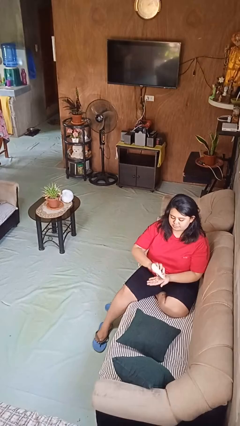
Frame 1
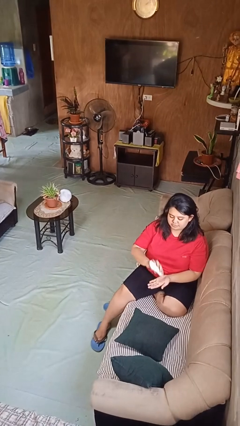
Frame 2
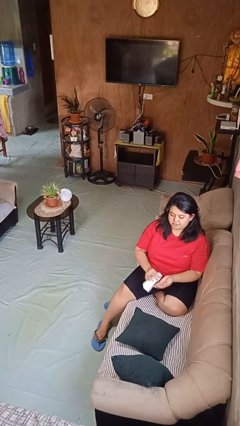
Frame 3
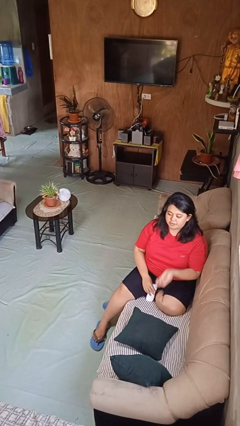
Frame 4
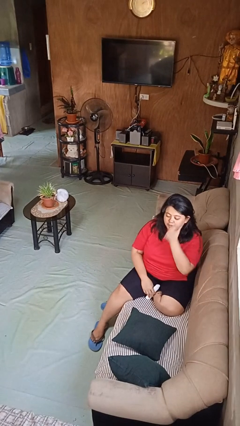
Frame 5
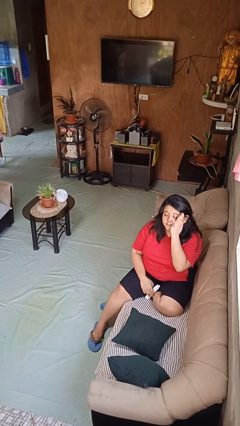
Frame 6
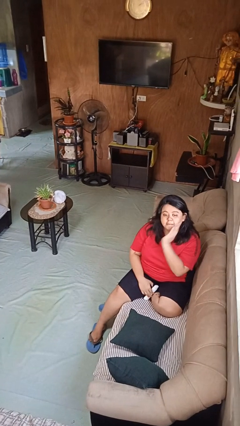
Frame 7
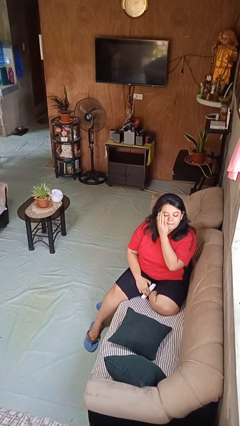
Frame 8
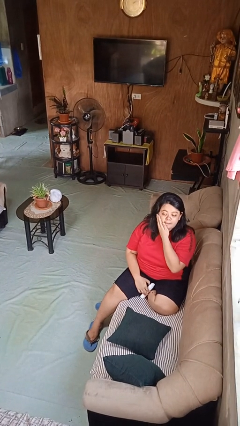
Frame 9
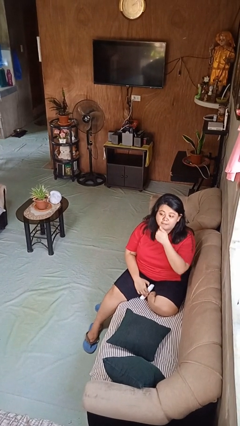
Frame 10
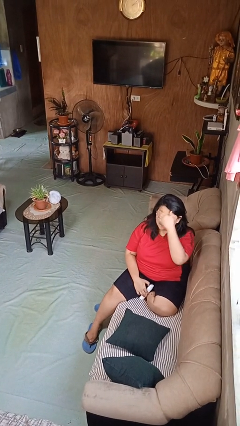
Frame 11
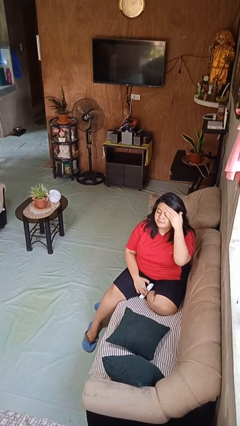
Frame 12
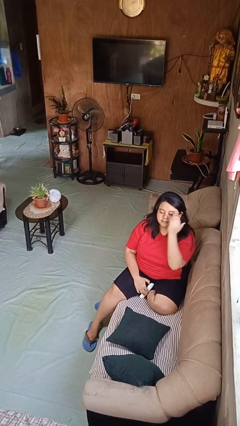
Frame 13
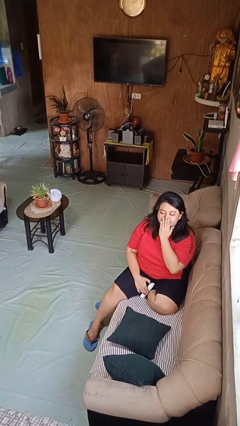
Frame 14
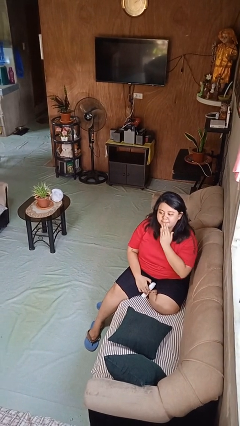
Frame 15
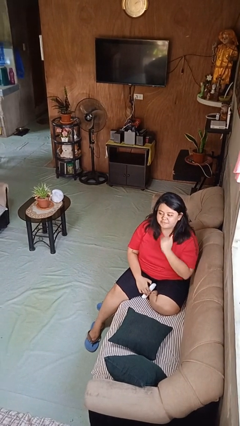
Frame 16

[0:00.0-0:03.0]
person applies facial moisturizer

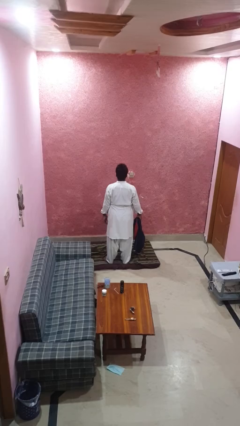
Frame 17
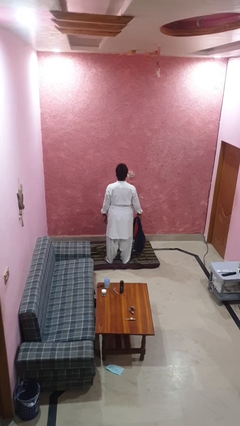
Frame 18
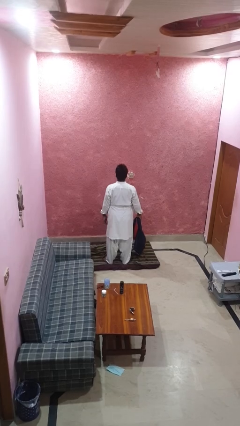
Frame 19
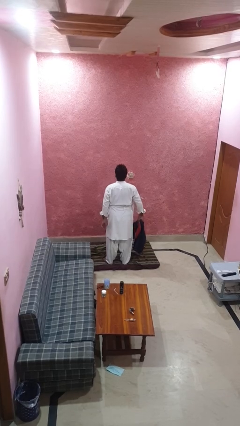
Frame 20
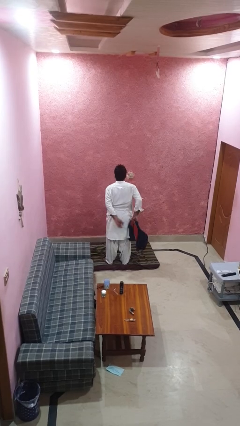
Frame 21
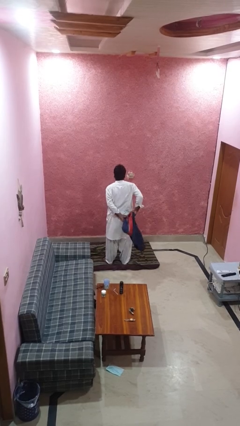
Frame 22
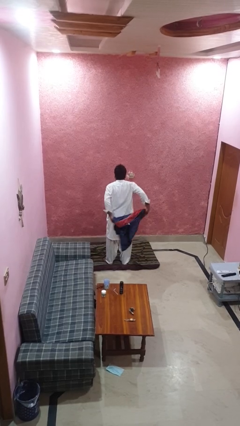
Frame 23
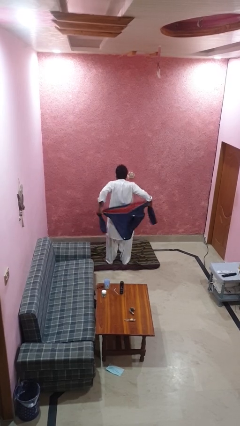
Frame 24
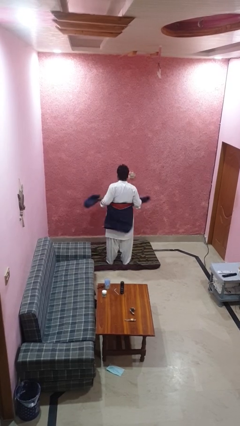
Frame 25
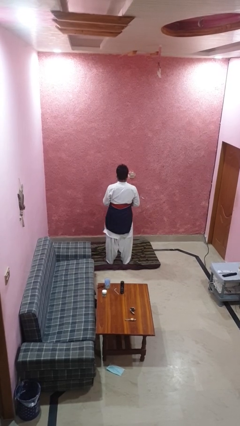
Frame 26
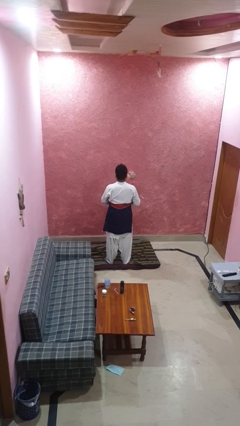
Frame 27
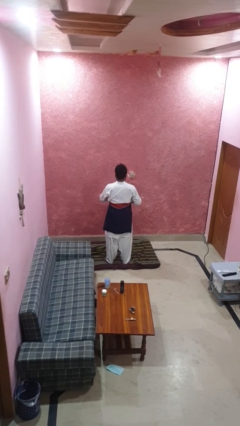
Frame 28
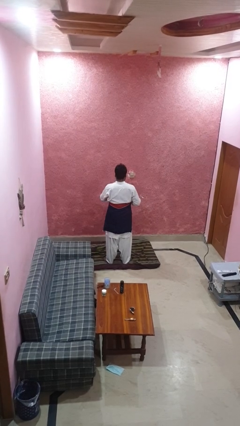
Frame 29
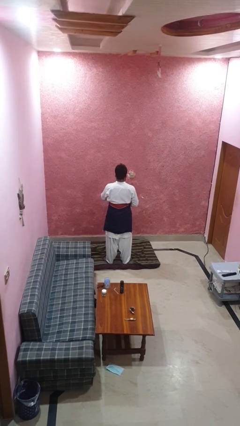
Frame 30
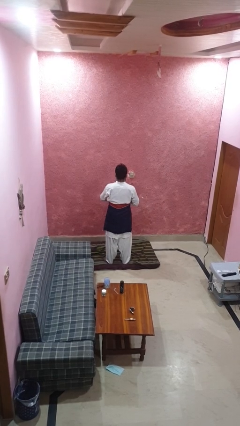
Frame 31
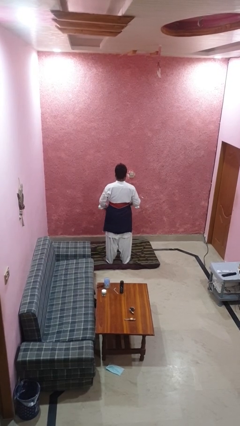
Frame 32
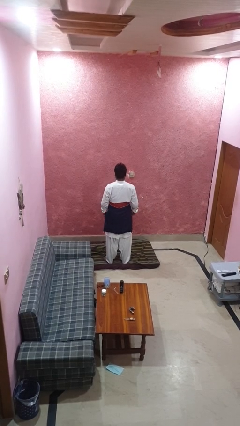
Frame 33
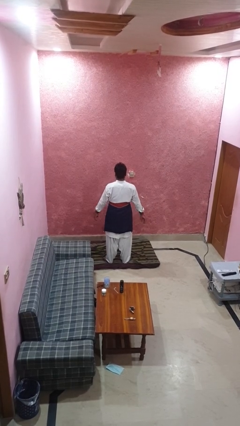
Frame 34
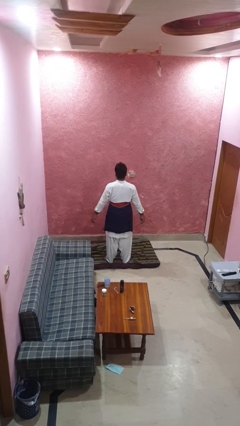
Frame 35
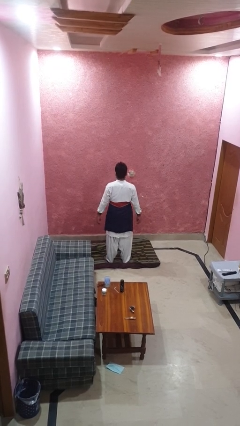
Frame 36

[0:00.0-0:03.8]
person ties jacket around waist

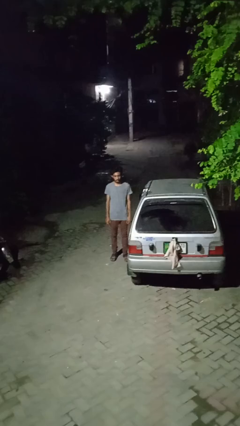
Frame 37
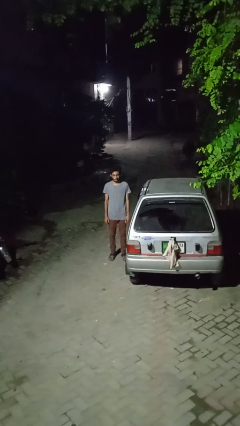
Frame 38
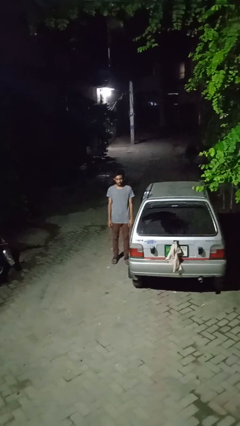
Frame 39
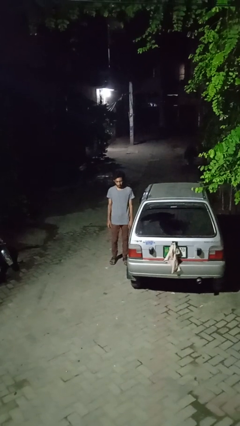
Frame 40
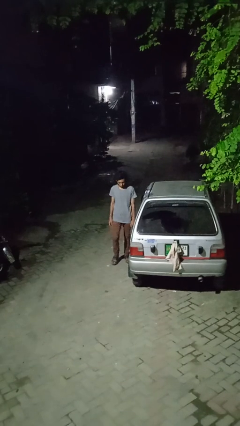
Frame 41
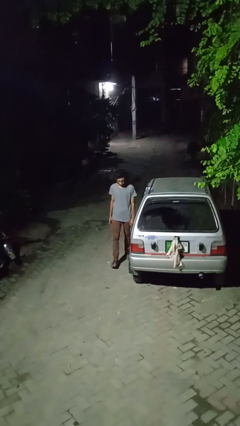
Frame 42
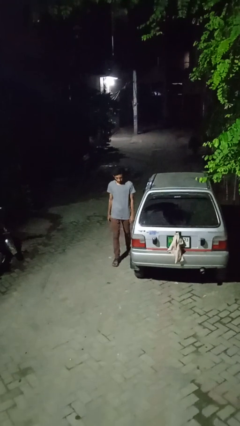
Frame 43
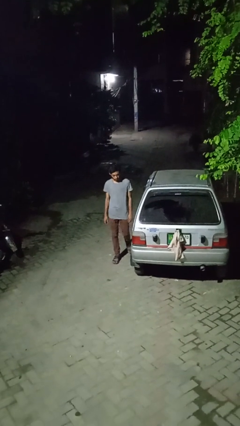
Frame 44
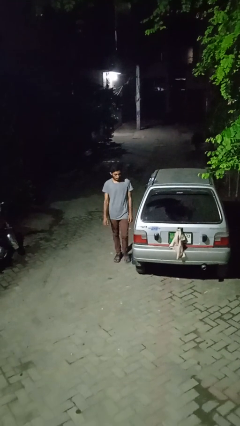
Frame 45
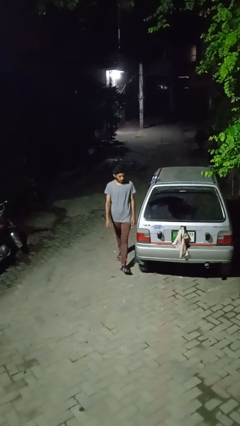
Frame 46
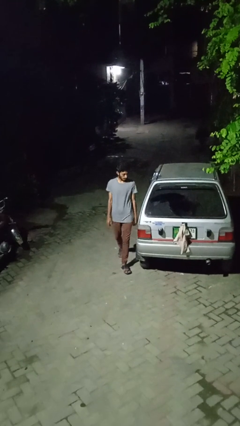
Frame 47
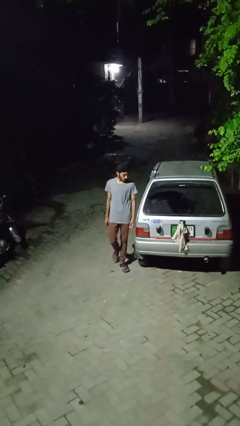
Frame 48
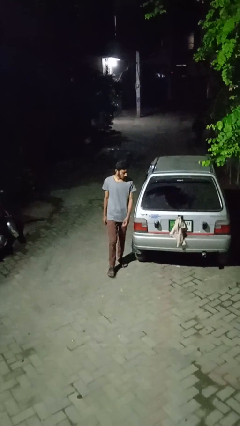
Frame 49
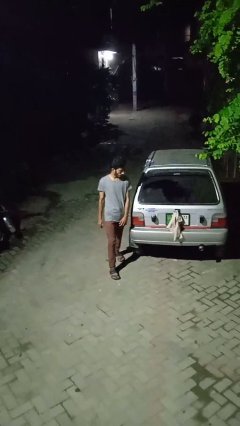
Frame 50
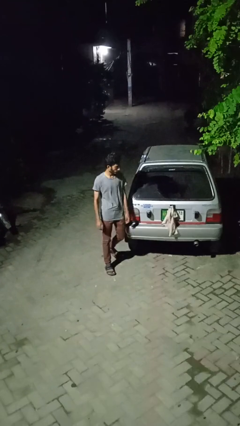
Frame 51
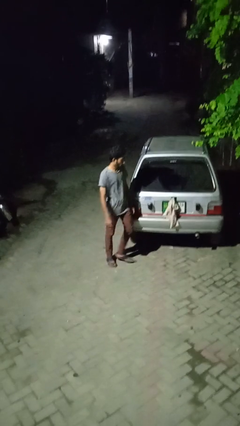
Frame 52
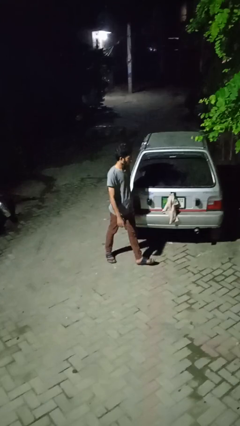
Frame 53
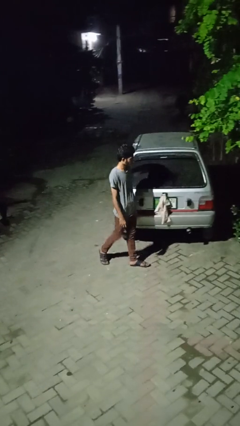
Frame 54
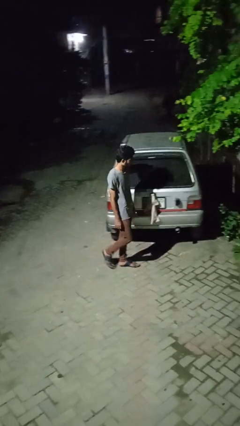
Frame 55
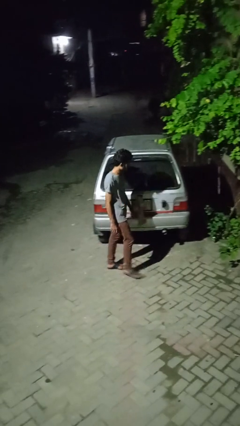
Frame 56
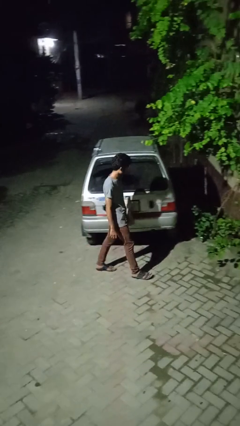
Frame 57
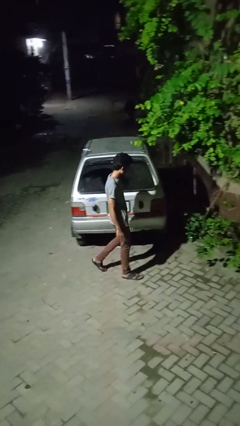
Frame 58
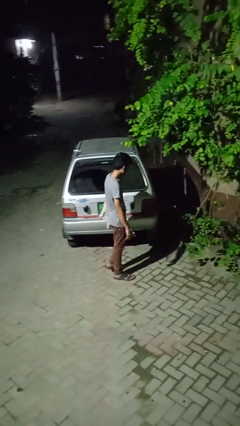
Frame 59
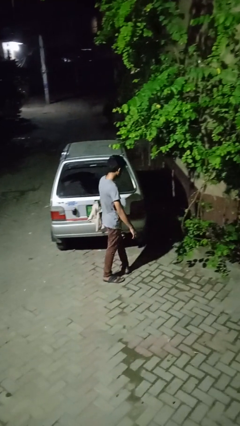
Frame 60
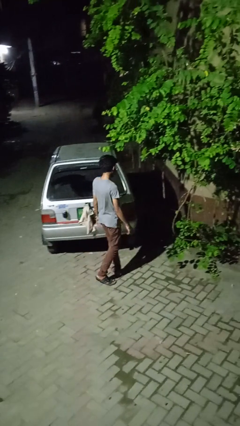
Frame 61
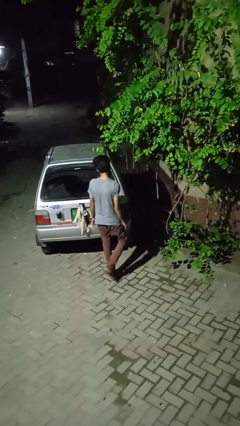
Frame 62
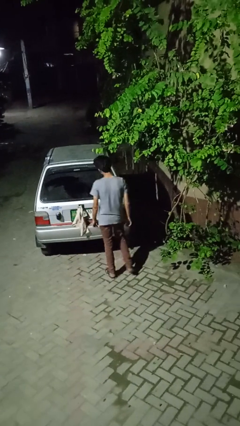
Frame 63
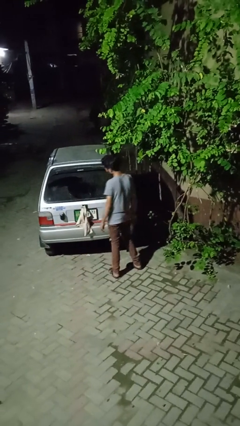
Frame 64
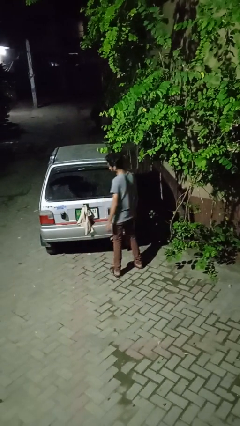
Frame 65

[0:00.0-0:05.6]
person walks around car

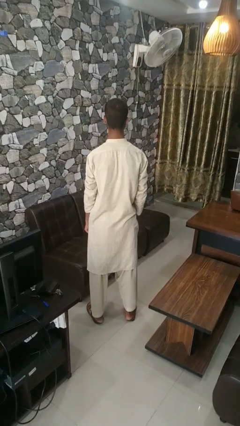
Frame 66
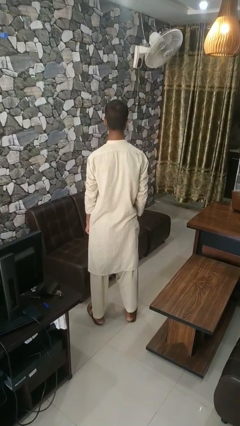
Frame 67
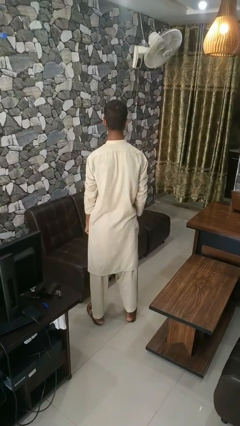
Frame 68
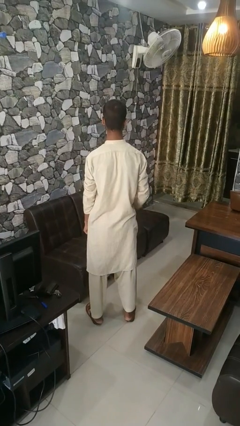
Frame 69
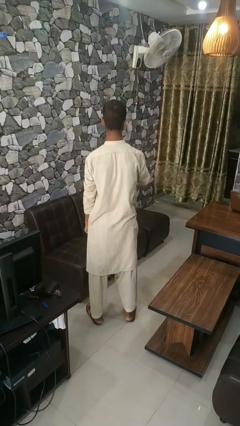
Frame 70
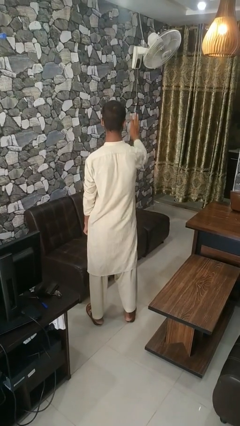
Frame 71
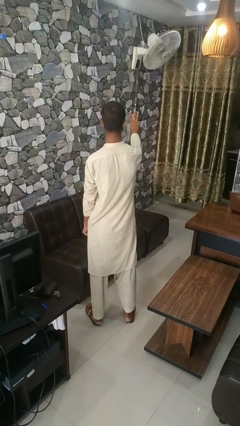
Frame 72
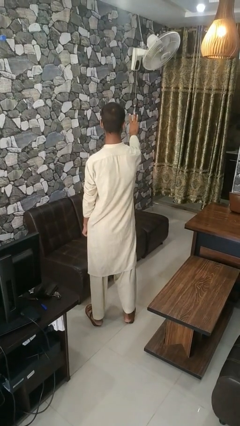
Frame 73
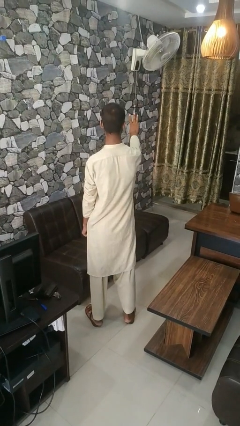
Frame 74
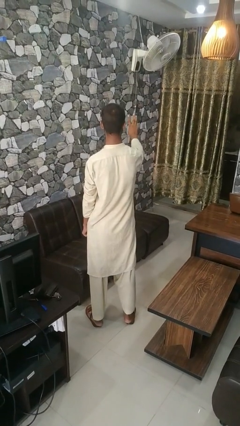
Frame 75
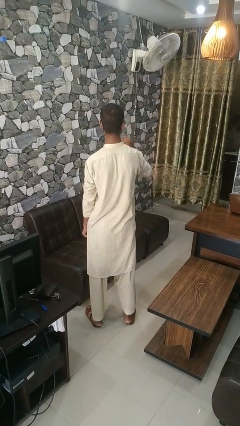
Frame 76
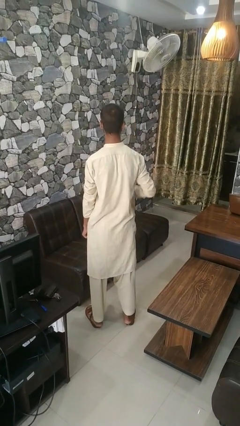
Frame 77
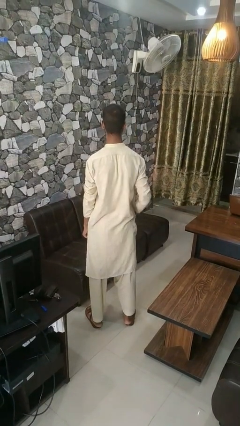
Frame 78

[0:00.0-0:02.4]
person gestures number three

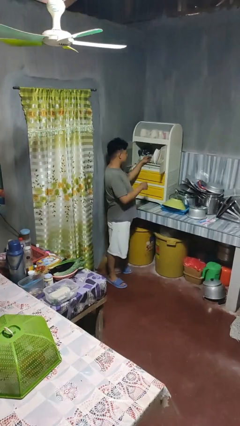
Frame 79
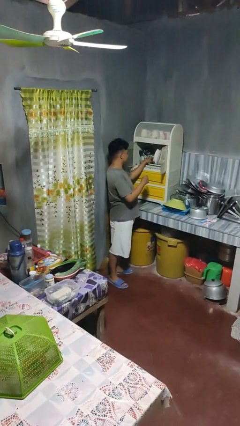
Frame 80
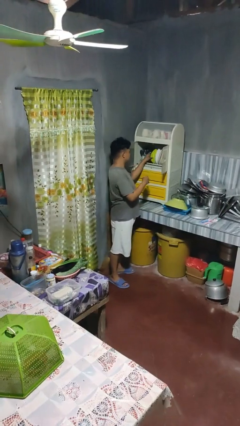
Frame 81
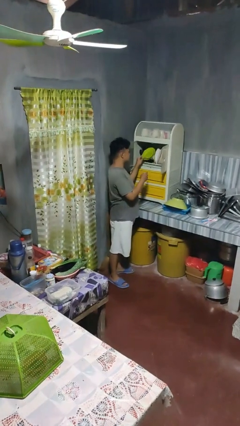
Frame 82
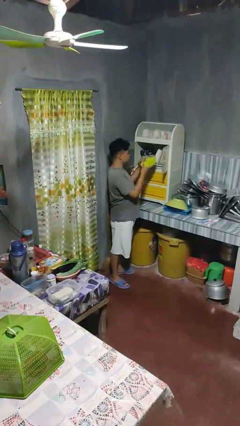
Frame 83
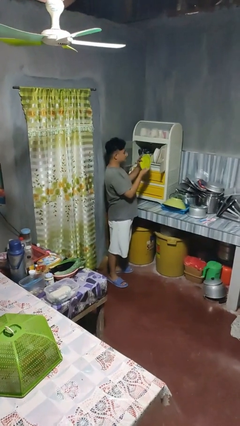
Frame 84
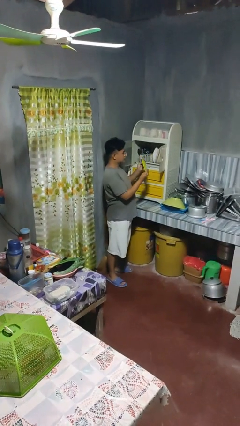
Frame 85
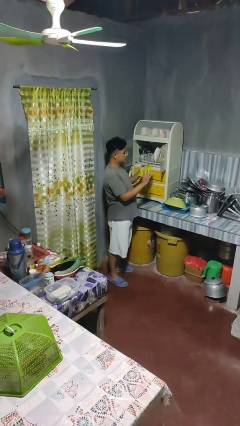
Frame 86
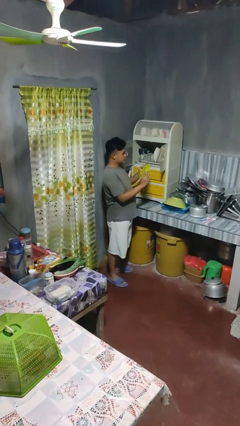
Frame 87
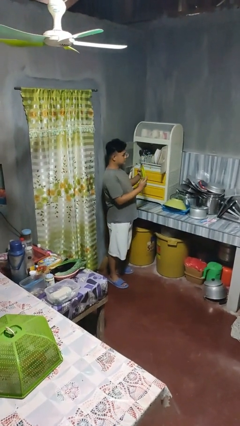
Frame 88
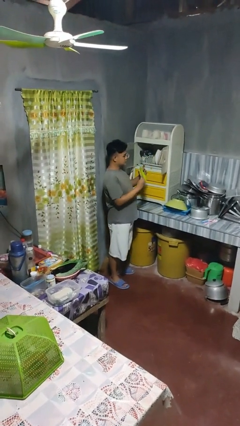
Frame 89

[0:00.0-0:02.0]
person takes object from cabinet

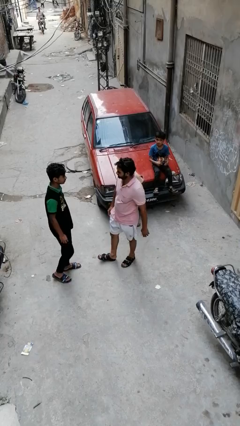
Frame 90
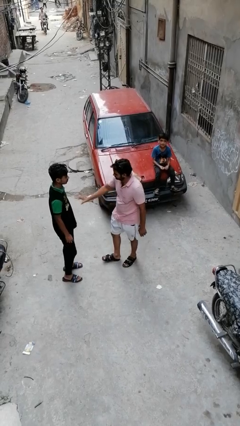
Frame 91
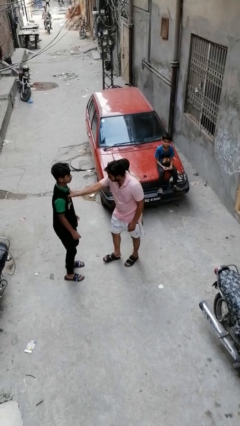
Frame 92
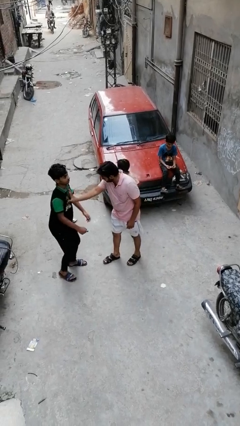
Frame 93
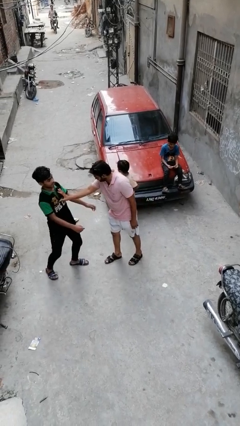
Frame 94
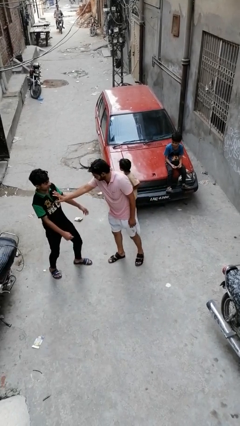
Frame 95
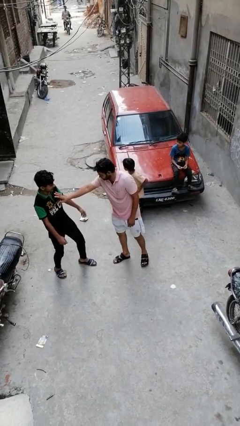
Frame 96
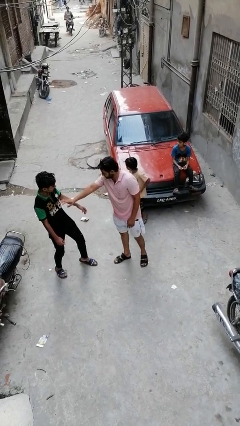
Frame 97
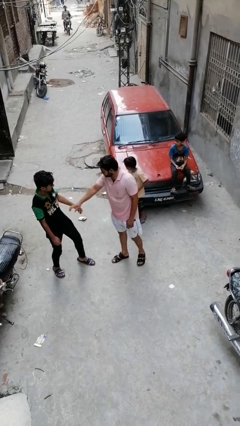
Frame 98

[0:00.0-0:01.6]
person shoves person
